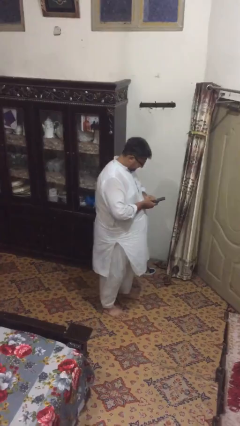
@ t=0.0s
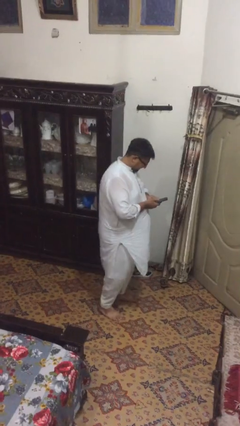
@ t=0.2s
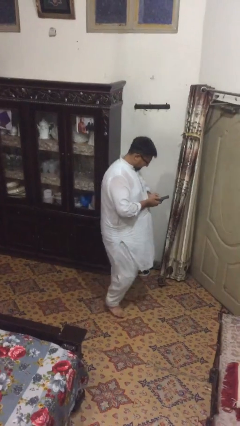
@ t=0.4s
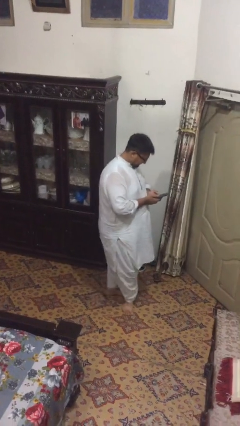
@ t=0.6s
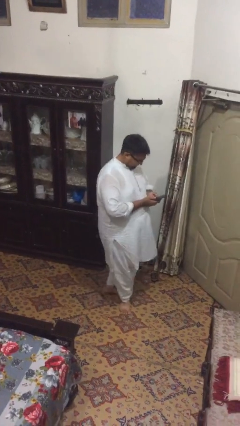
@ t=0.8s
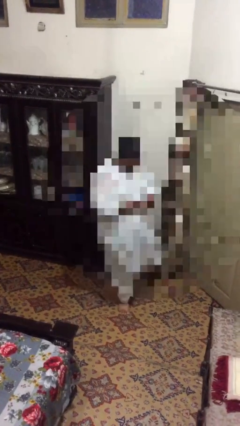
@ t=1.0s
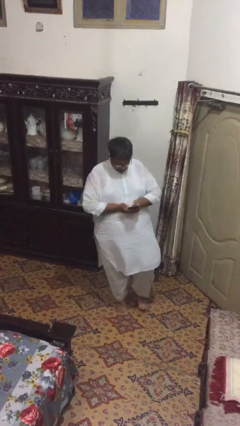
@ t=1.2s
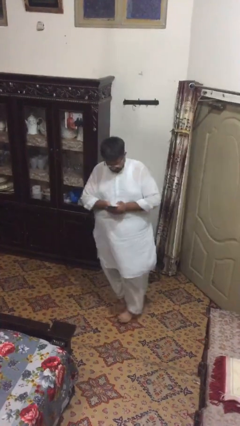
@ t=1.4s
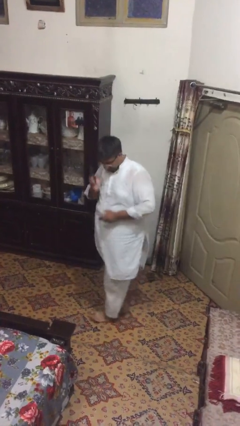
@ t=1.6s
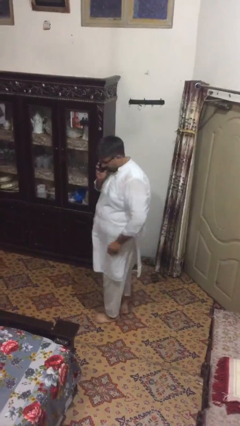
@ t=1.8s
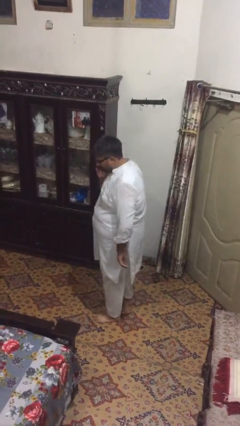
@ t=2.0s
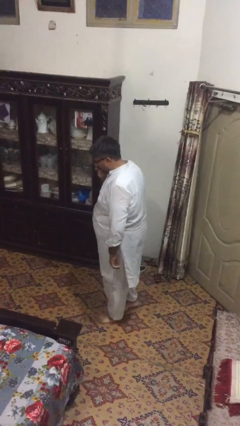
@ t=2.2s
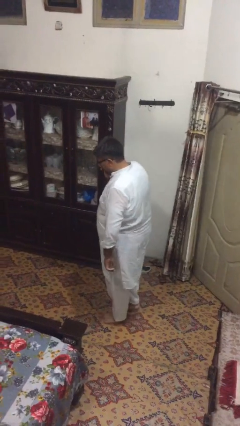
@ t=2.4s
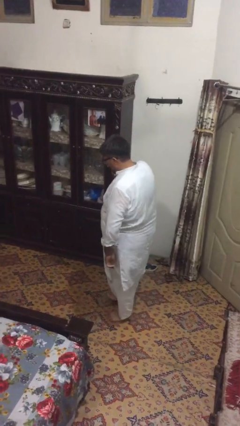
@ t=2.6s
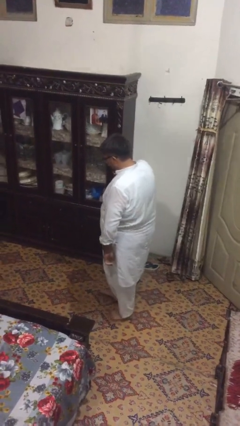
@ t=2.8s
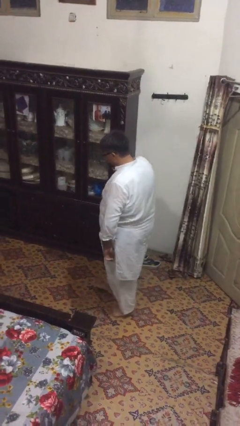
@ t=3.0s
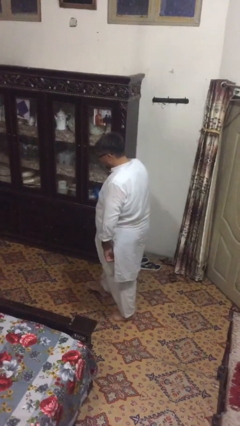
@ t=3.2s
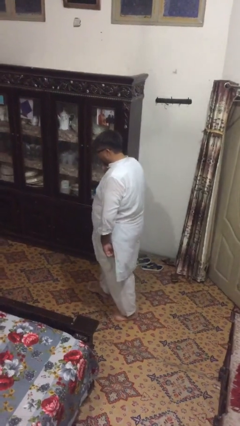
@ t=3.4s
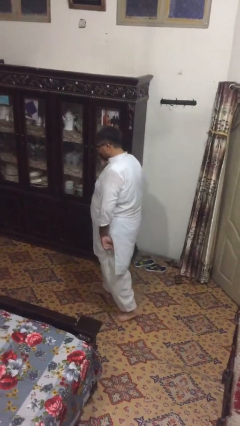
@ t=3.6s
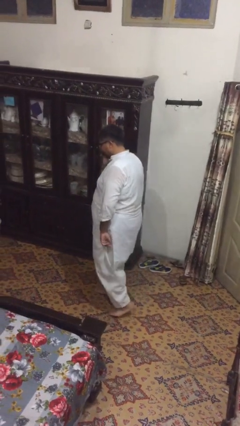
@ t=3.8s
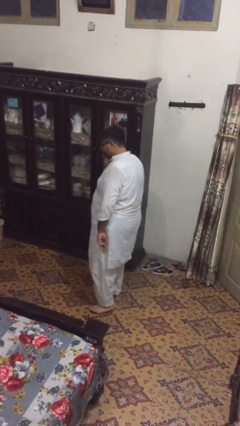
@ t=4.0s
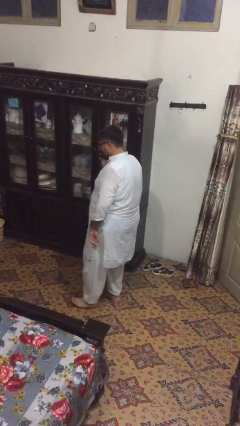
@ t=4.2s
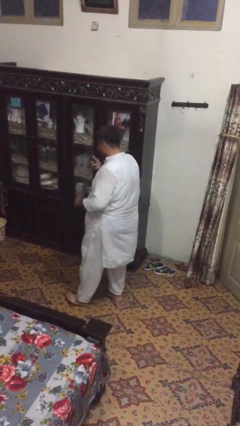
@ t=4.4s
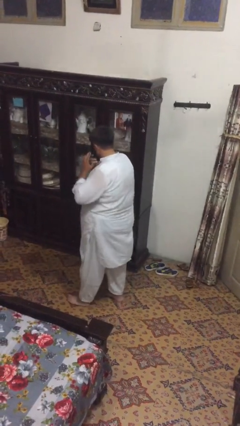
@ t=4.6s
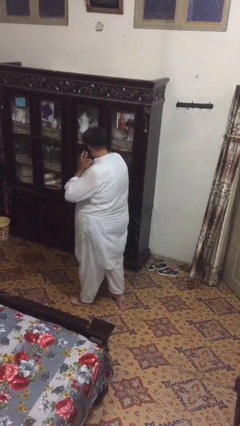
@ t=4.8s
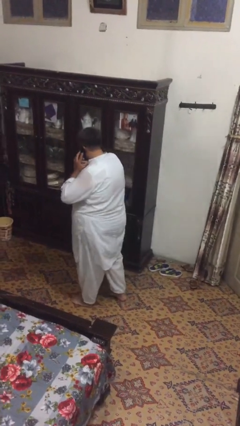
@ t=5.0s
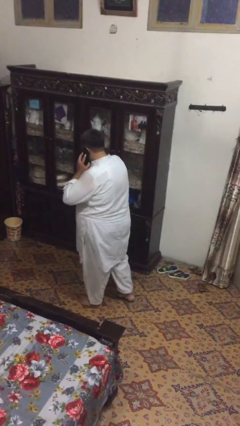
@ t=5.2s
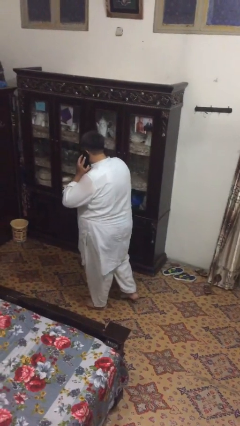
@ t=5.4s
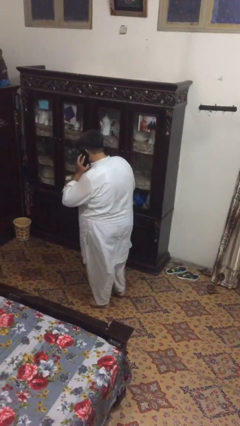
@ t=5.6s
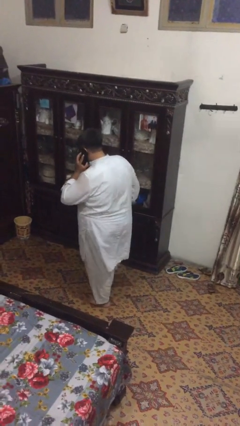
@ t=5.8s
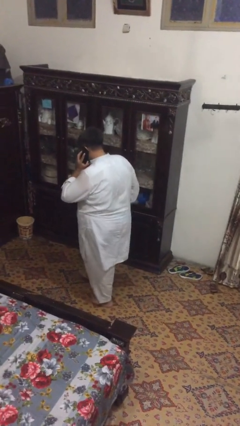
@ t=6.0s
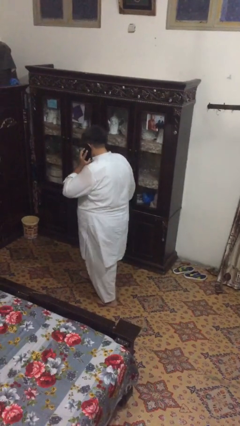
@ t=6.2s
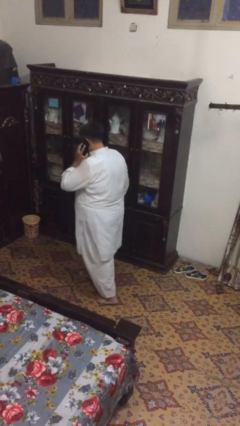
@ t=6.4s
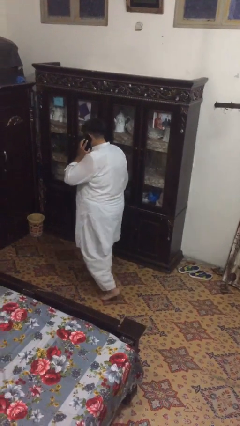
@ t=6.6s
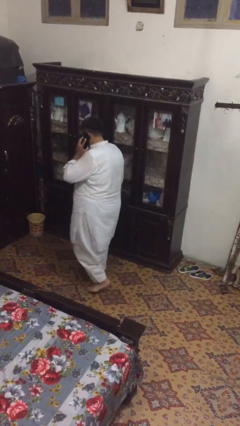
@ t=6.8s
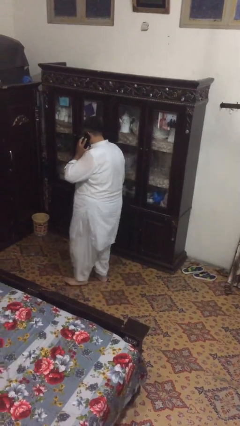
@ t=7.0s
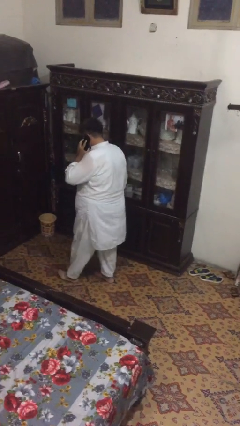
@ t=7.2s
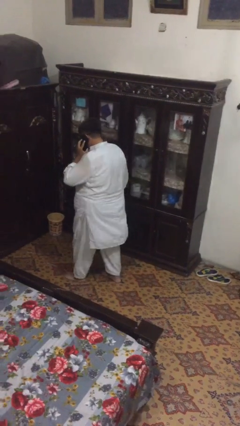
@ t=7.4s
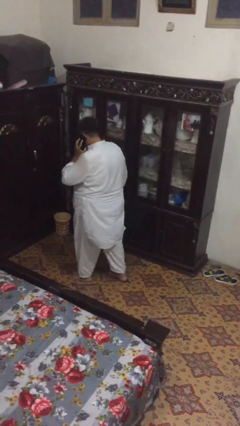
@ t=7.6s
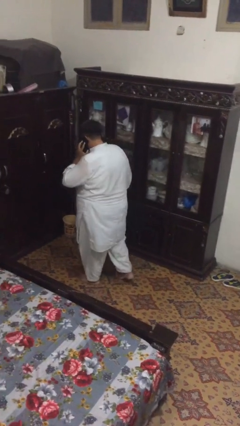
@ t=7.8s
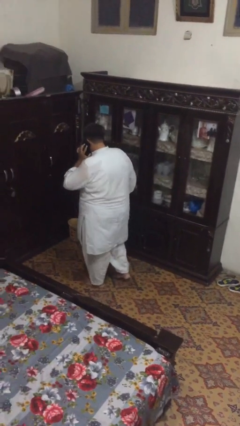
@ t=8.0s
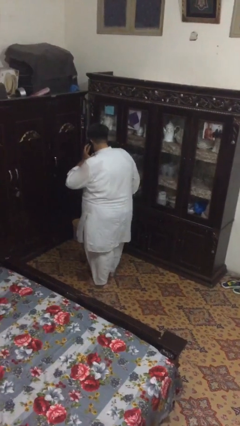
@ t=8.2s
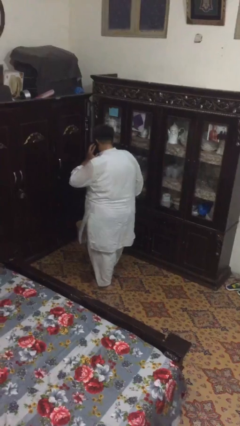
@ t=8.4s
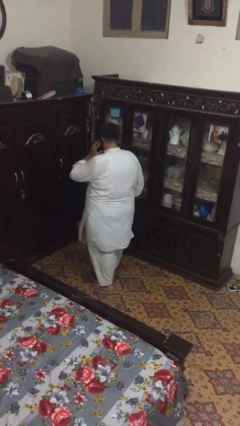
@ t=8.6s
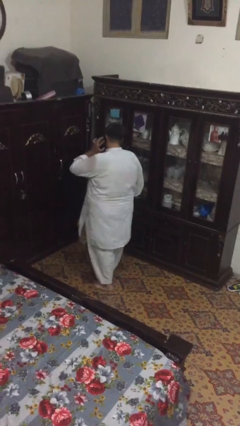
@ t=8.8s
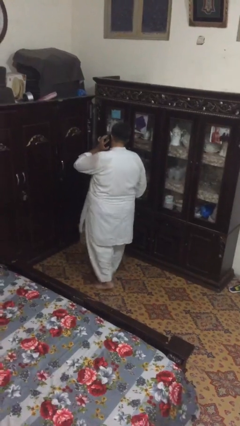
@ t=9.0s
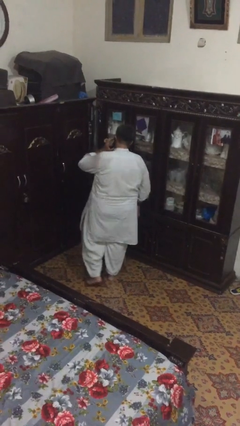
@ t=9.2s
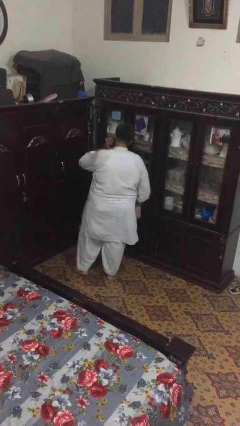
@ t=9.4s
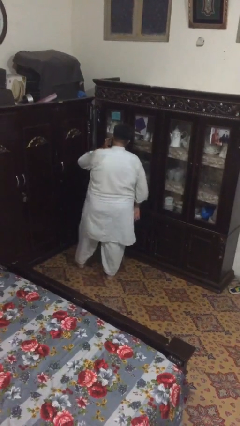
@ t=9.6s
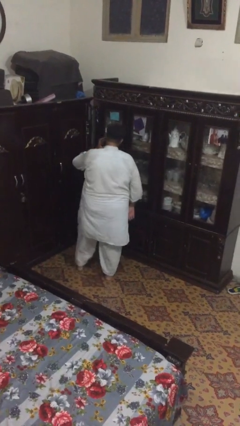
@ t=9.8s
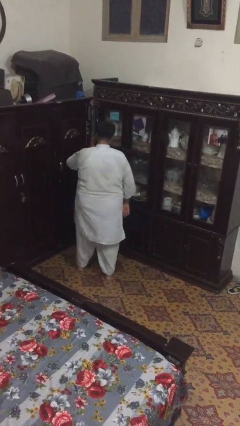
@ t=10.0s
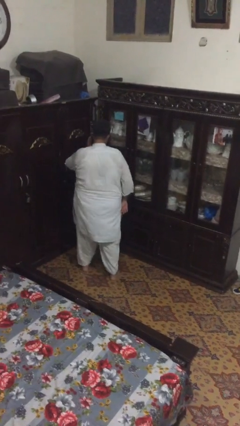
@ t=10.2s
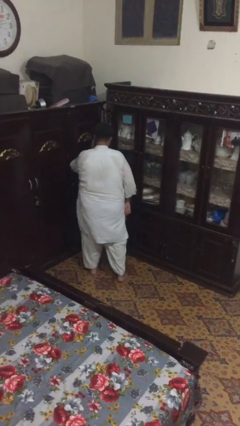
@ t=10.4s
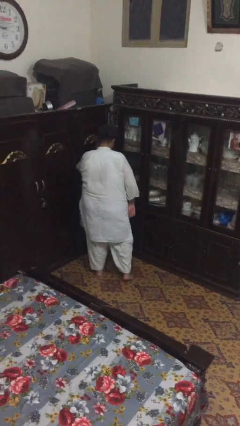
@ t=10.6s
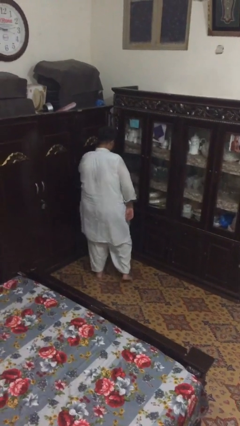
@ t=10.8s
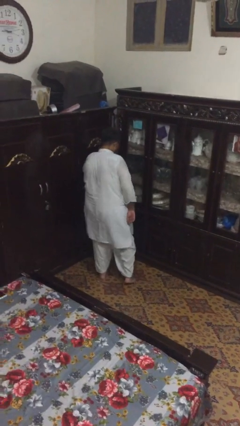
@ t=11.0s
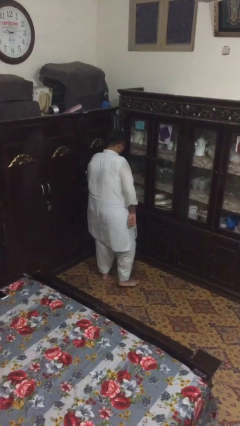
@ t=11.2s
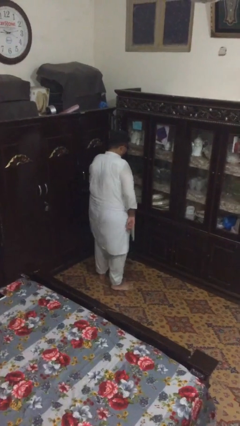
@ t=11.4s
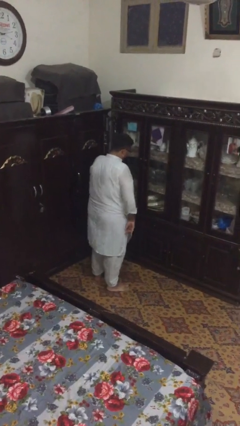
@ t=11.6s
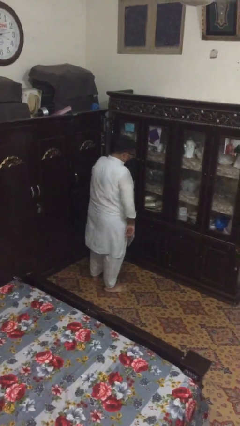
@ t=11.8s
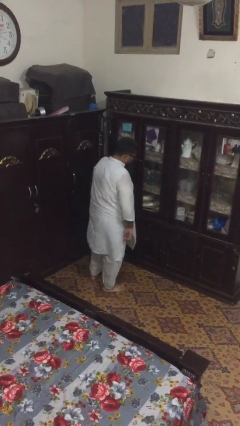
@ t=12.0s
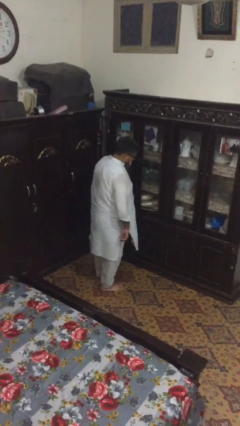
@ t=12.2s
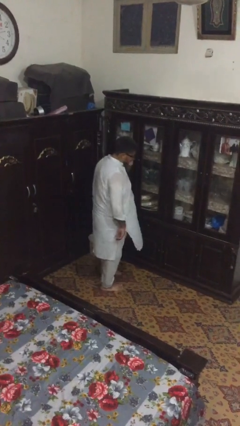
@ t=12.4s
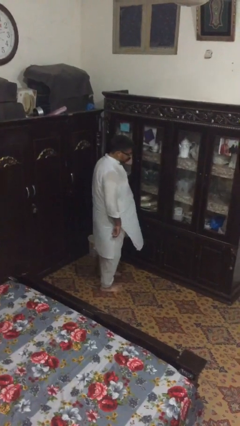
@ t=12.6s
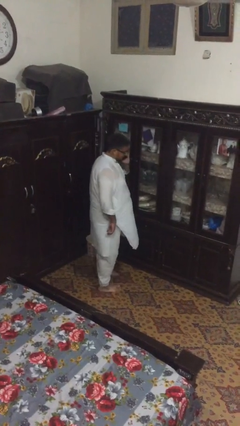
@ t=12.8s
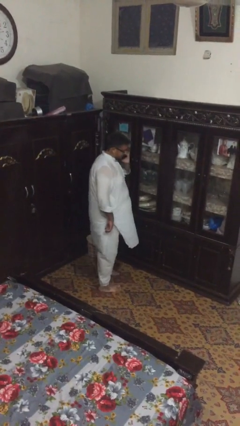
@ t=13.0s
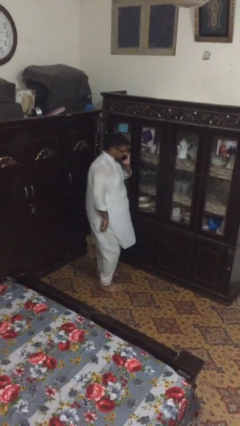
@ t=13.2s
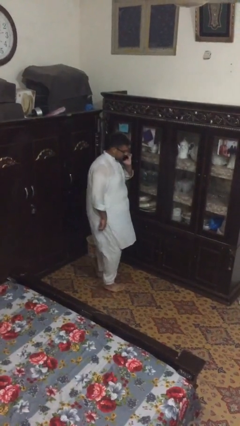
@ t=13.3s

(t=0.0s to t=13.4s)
person talks on phone

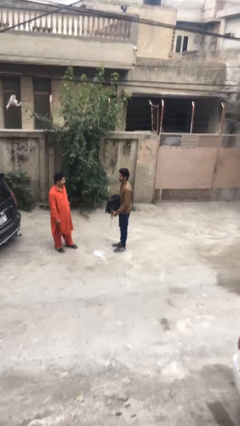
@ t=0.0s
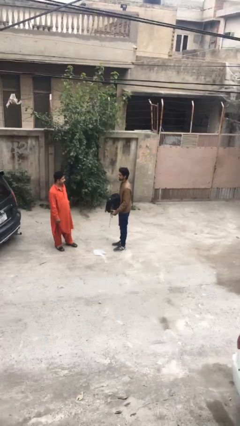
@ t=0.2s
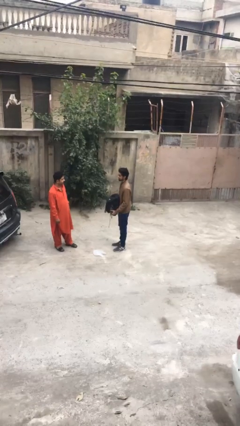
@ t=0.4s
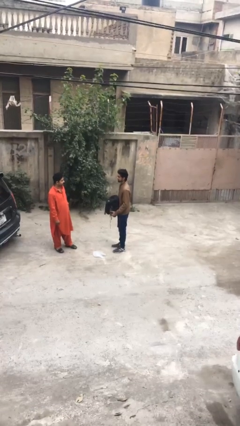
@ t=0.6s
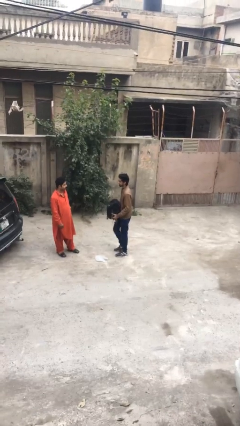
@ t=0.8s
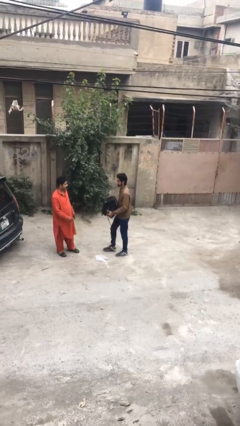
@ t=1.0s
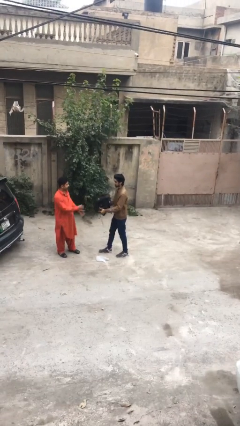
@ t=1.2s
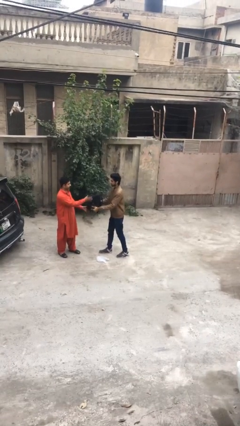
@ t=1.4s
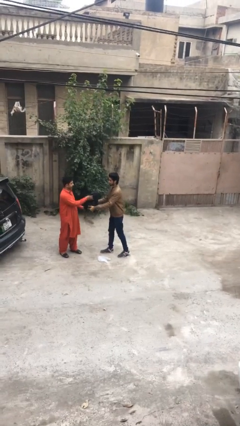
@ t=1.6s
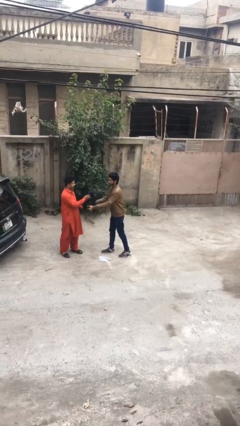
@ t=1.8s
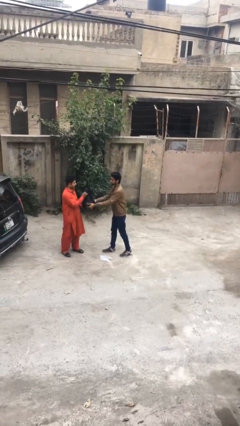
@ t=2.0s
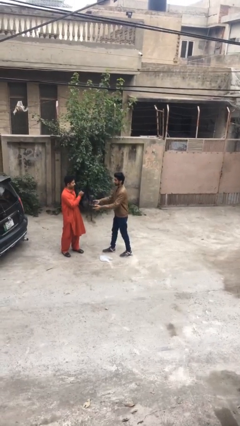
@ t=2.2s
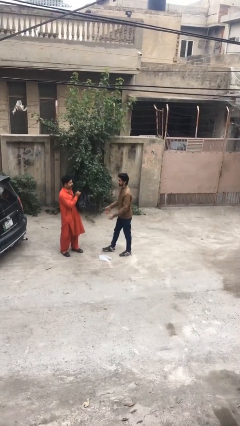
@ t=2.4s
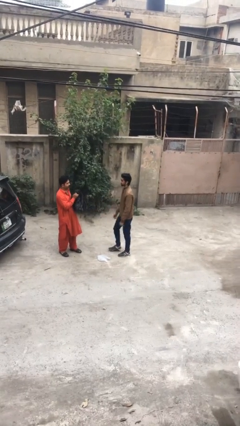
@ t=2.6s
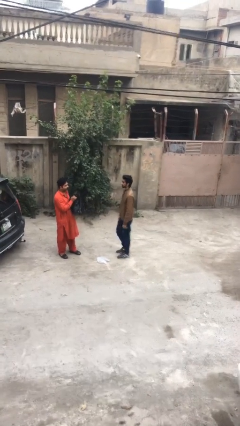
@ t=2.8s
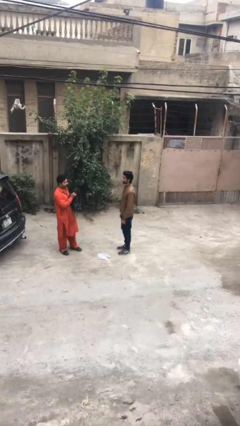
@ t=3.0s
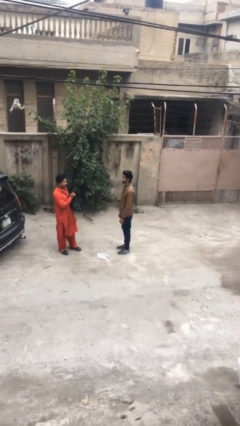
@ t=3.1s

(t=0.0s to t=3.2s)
person transfers object to person

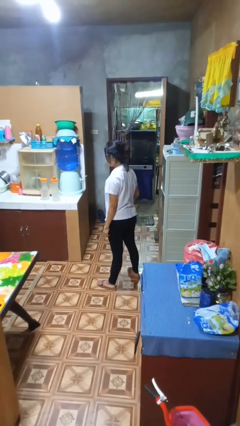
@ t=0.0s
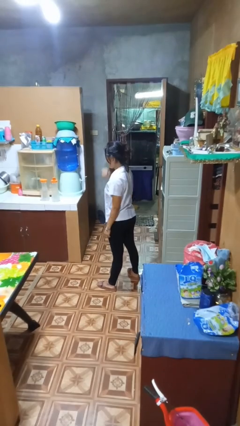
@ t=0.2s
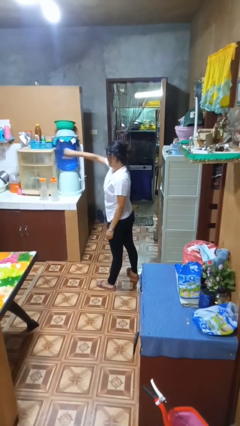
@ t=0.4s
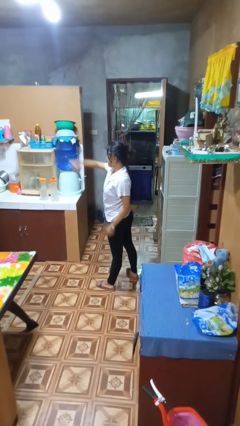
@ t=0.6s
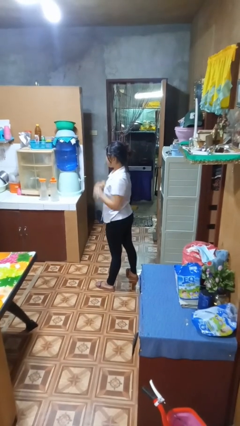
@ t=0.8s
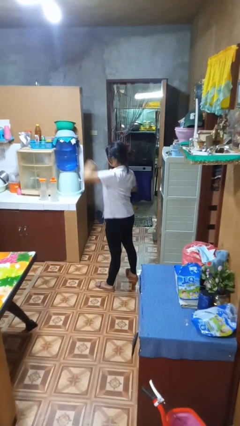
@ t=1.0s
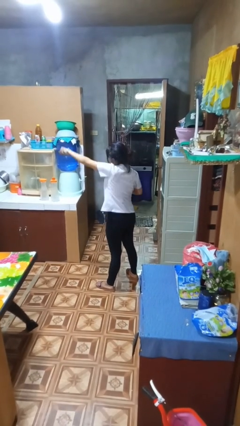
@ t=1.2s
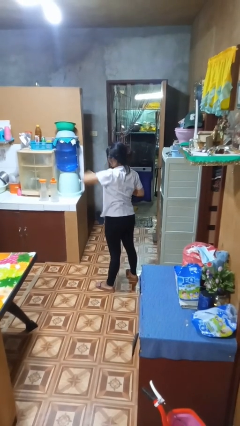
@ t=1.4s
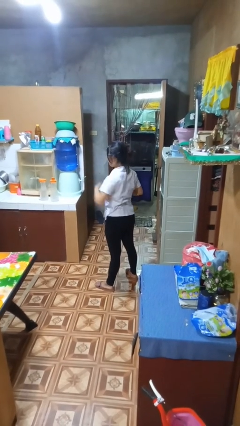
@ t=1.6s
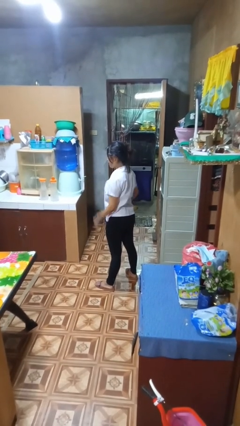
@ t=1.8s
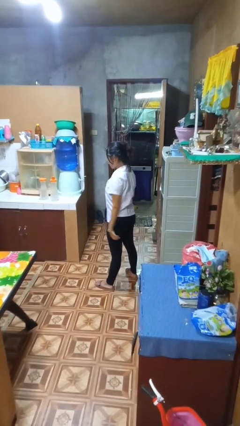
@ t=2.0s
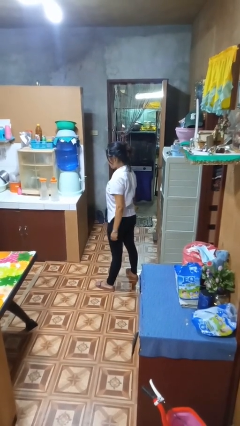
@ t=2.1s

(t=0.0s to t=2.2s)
person punches
